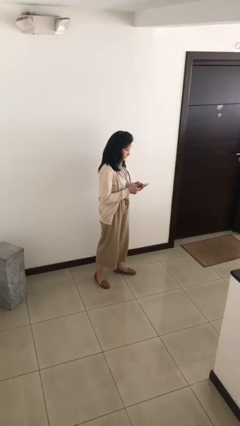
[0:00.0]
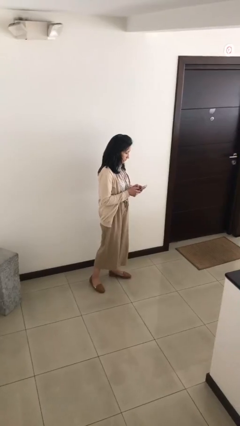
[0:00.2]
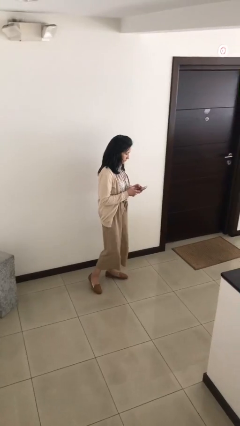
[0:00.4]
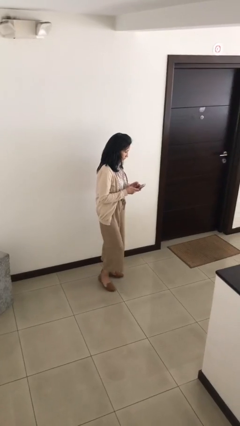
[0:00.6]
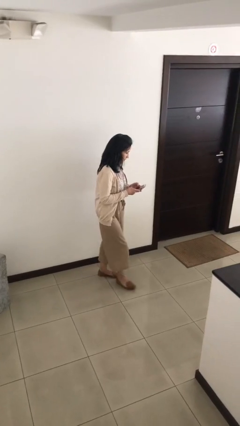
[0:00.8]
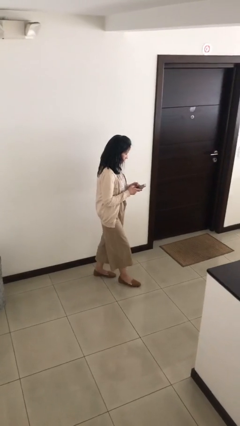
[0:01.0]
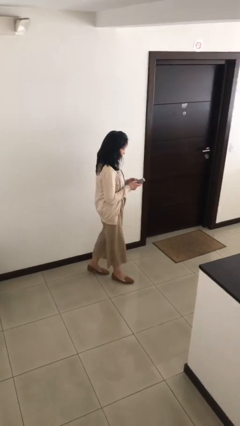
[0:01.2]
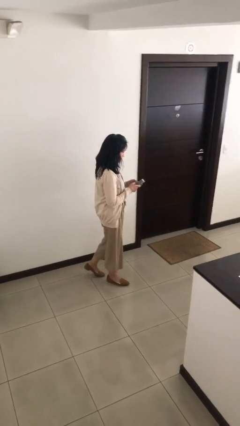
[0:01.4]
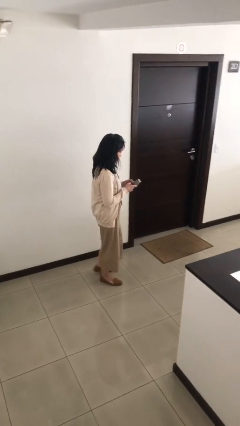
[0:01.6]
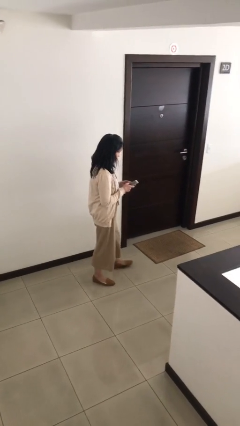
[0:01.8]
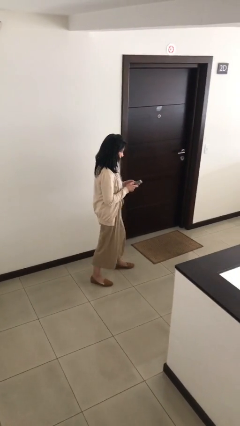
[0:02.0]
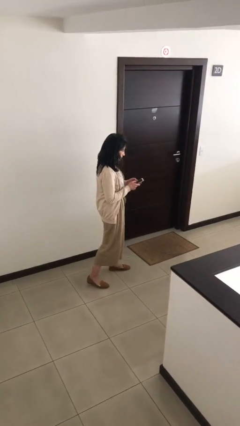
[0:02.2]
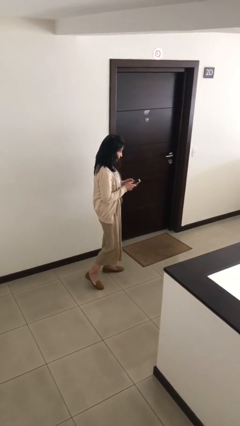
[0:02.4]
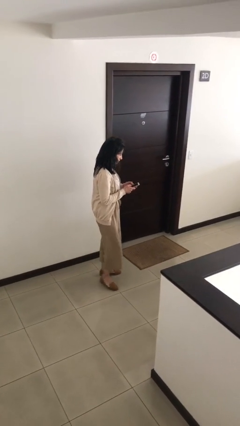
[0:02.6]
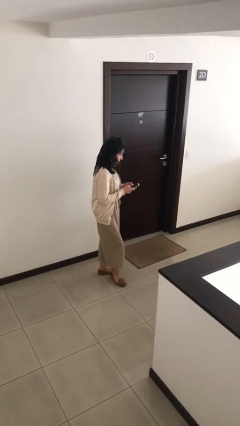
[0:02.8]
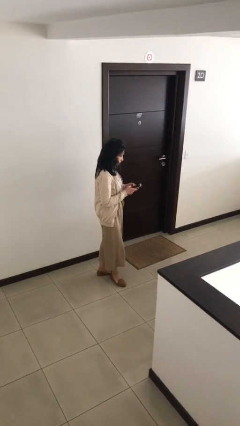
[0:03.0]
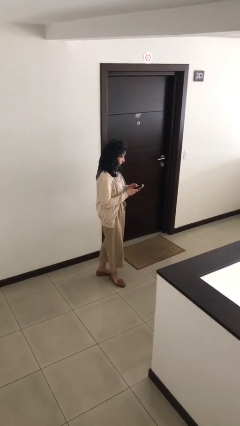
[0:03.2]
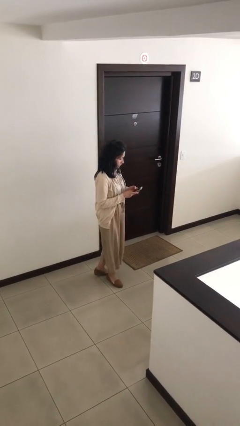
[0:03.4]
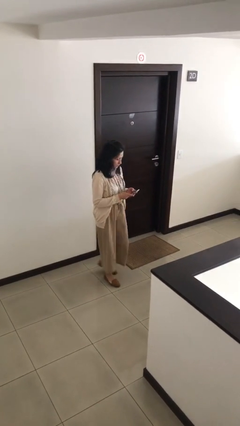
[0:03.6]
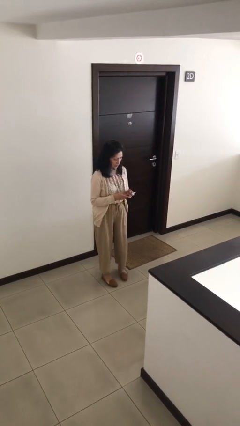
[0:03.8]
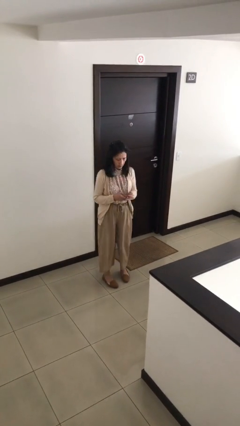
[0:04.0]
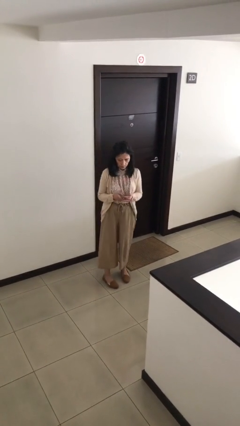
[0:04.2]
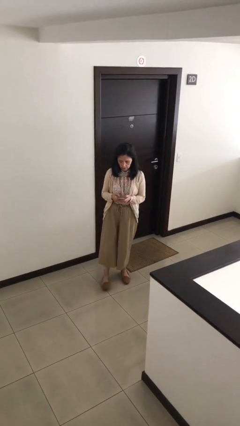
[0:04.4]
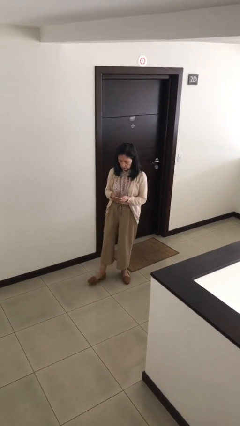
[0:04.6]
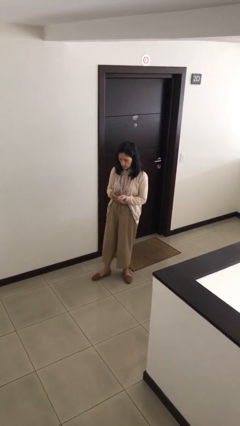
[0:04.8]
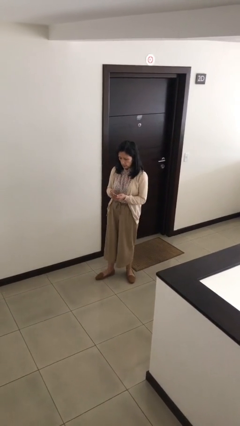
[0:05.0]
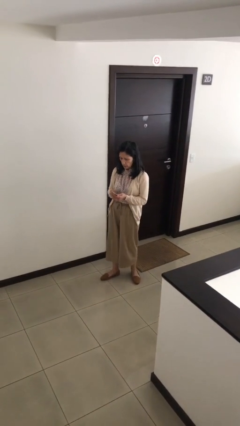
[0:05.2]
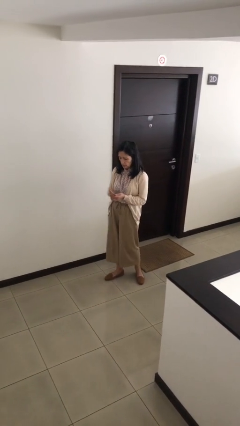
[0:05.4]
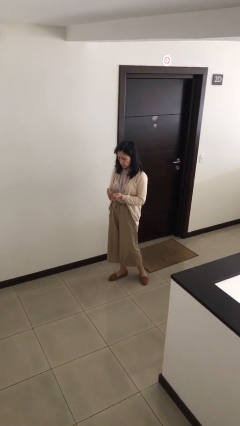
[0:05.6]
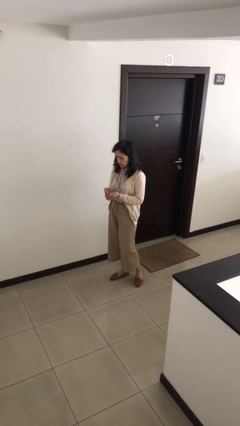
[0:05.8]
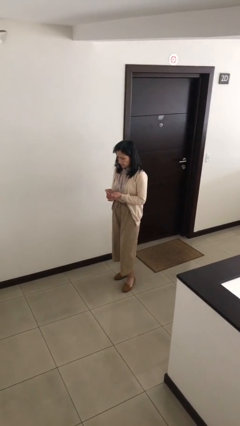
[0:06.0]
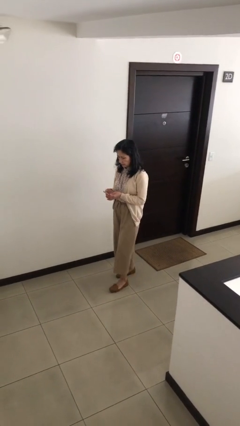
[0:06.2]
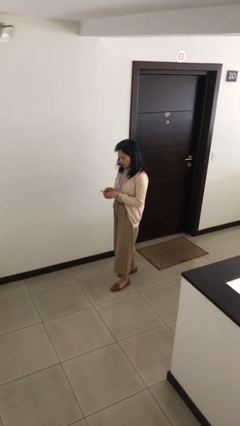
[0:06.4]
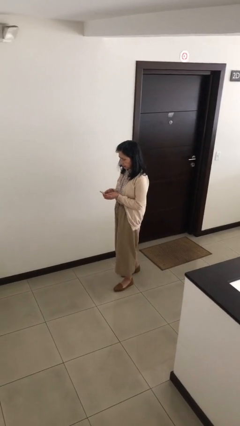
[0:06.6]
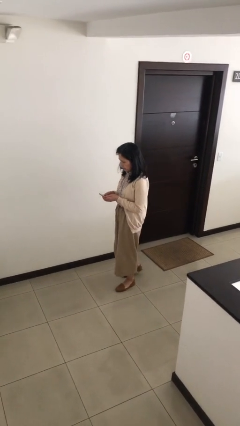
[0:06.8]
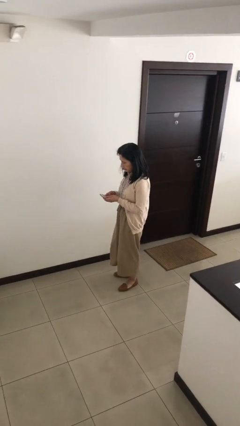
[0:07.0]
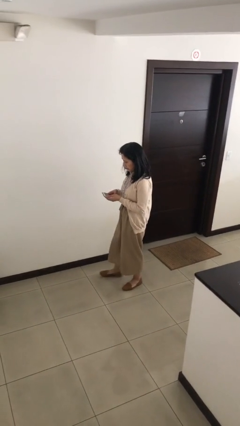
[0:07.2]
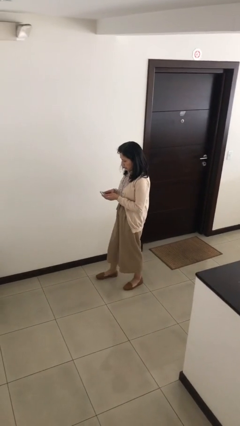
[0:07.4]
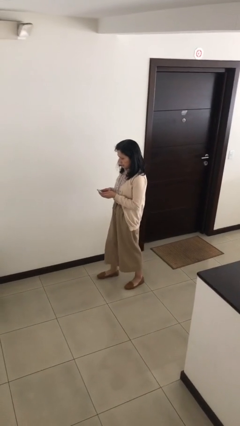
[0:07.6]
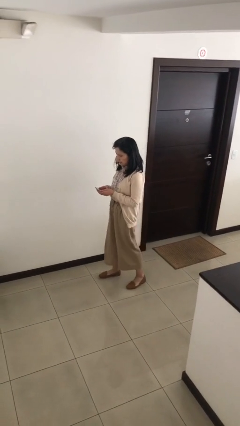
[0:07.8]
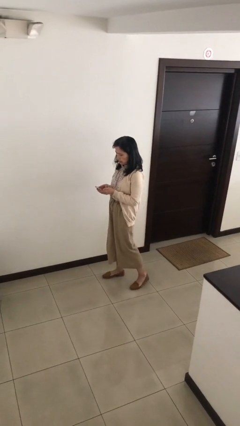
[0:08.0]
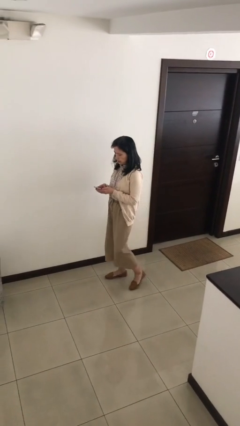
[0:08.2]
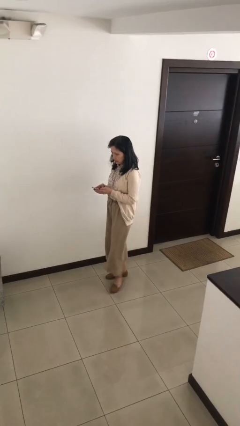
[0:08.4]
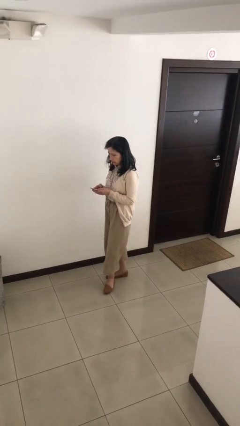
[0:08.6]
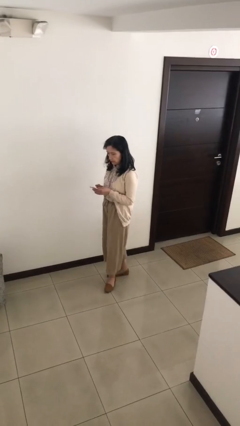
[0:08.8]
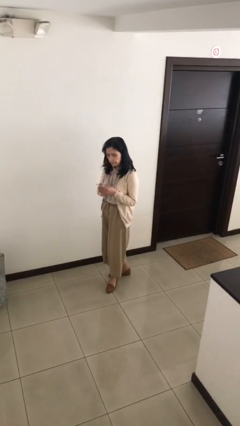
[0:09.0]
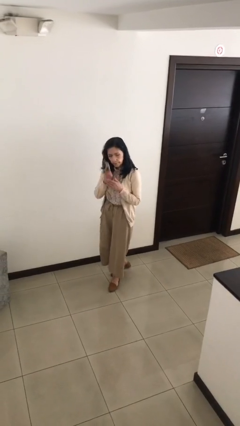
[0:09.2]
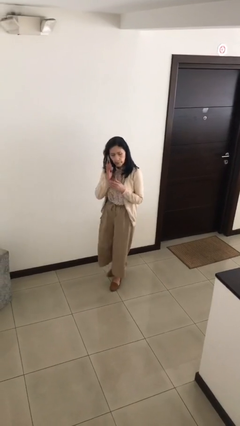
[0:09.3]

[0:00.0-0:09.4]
person texts on phone

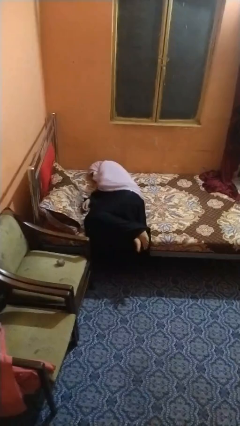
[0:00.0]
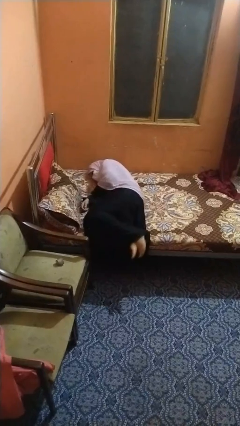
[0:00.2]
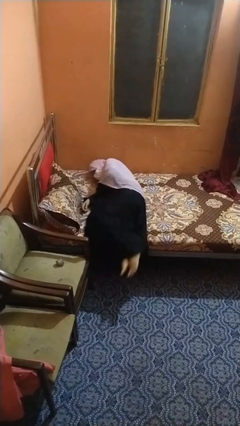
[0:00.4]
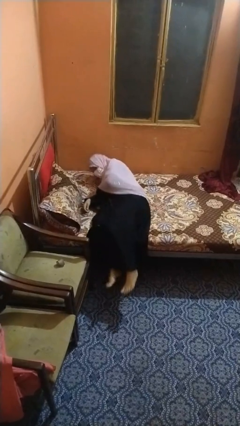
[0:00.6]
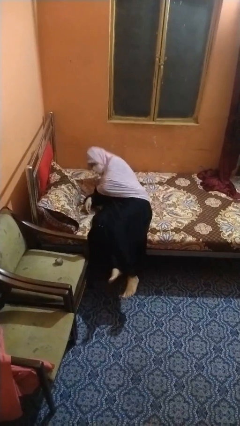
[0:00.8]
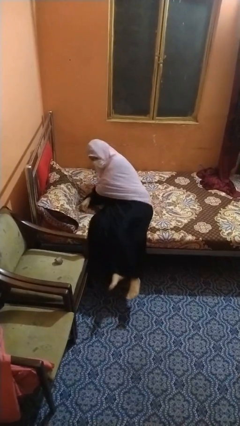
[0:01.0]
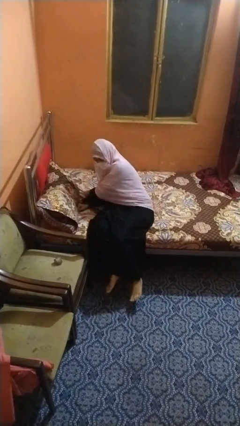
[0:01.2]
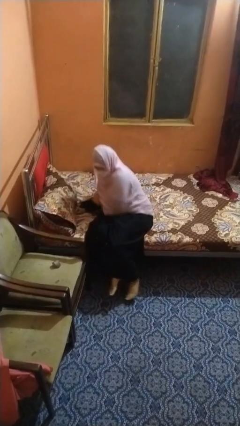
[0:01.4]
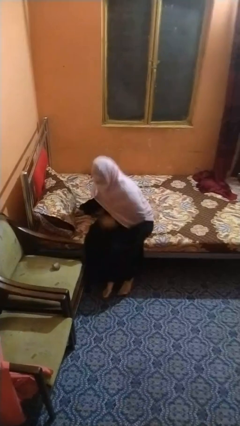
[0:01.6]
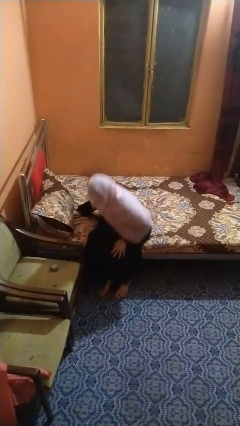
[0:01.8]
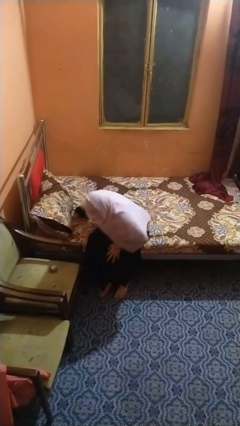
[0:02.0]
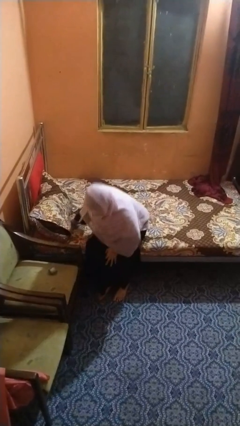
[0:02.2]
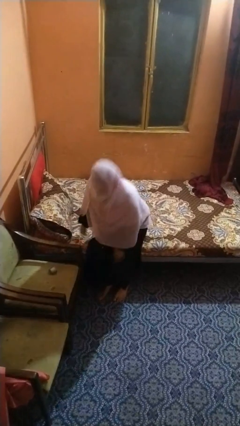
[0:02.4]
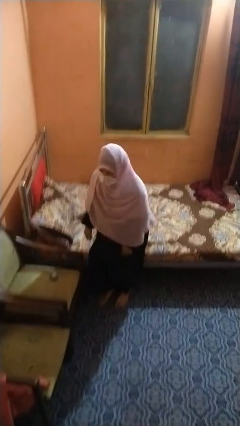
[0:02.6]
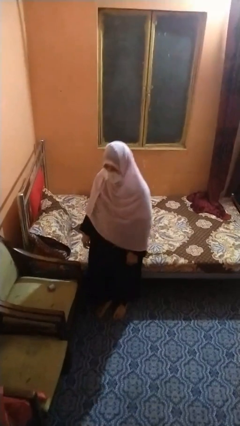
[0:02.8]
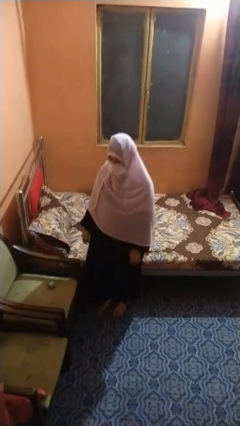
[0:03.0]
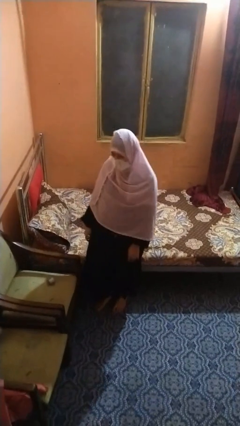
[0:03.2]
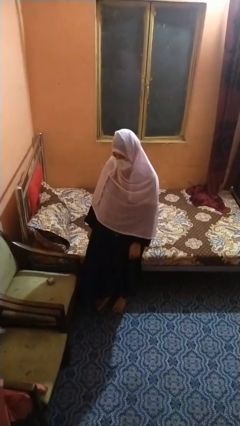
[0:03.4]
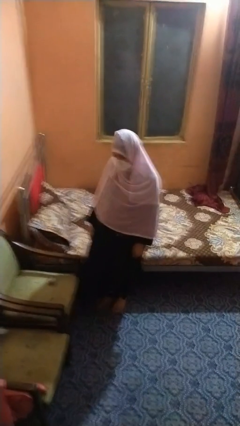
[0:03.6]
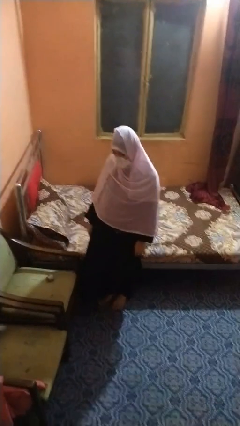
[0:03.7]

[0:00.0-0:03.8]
person stands up

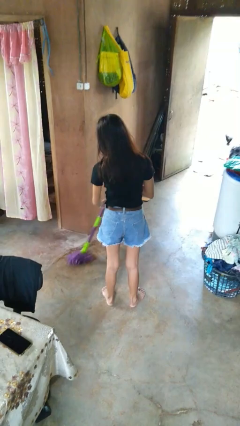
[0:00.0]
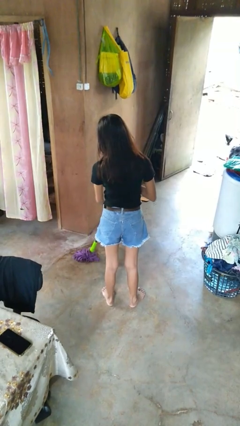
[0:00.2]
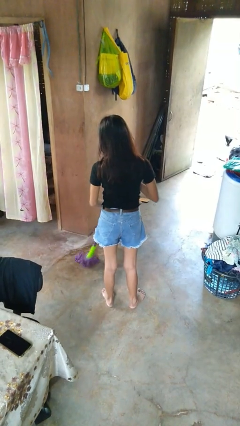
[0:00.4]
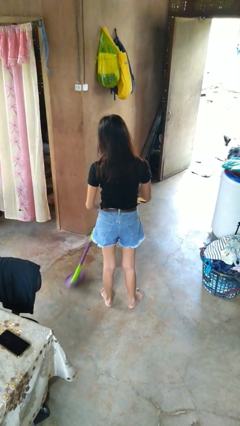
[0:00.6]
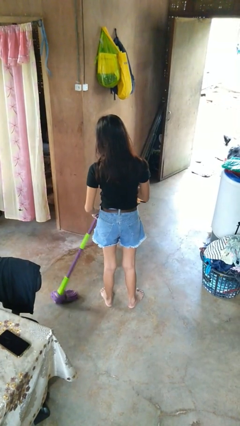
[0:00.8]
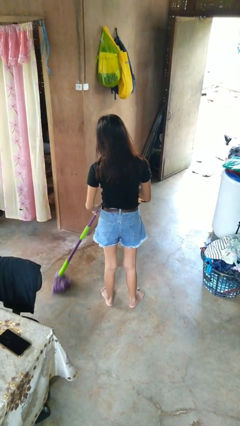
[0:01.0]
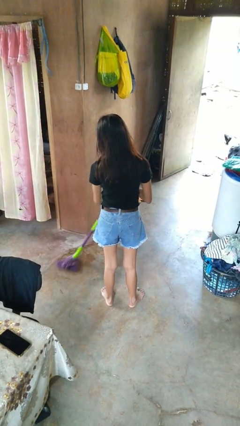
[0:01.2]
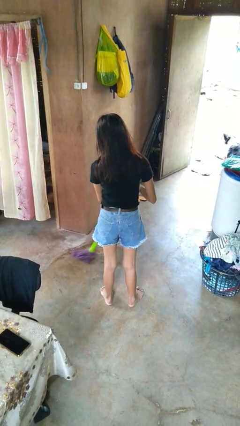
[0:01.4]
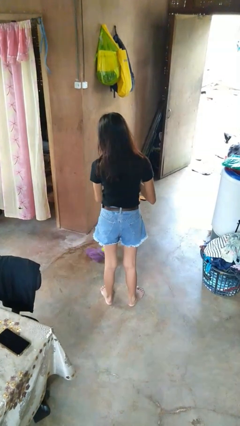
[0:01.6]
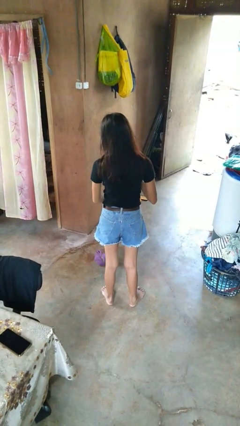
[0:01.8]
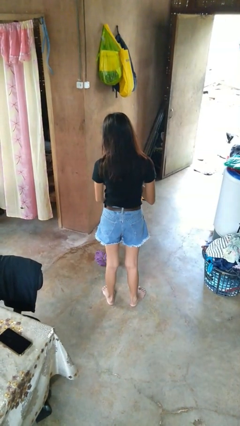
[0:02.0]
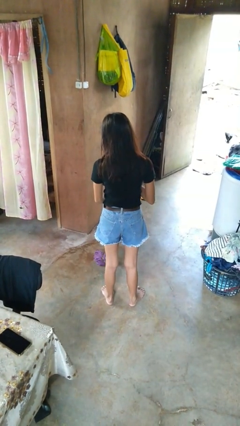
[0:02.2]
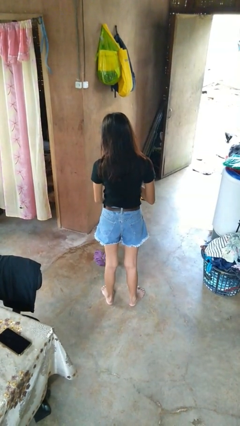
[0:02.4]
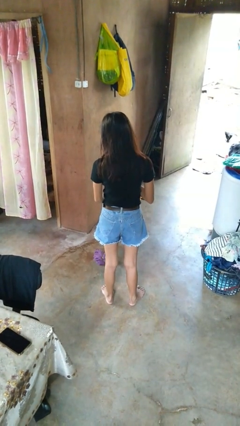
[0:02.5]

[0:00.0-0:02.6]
person mops

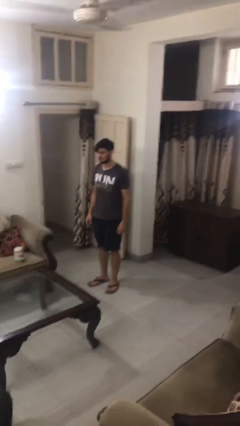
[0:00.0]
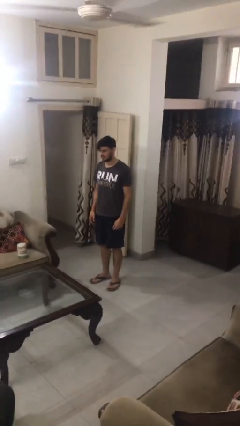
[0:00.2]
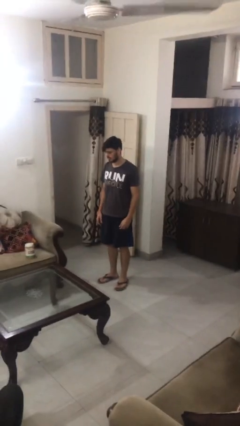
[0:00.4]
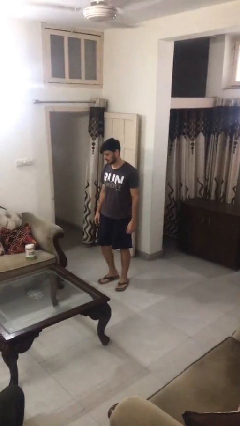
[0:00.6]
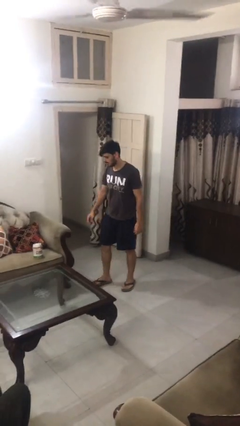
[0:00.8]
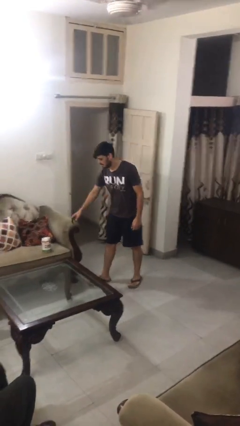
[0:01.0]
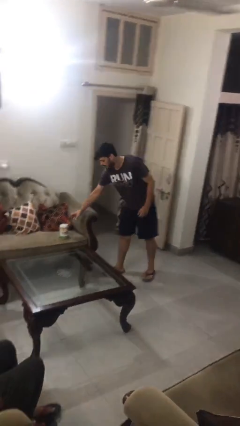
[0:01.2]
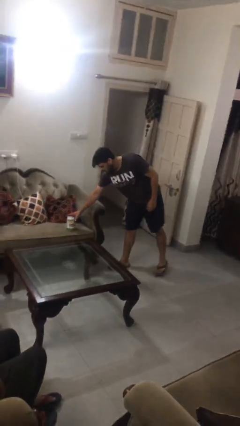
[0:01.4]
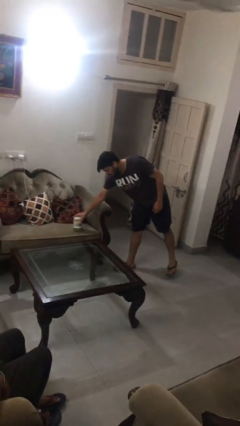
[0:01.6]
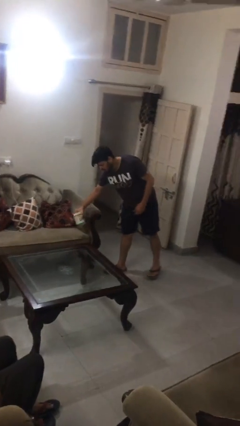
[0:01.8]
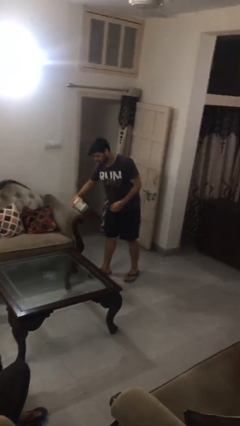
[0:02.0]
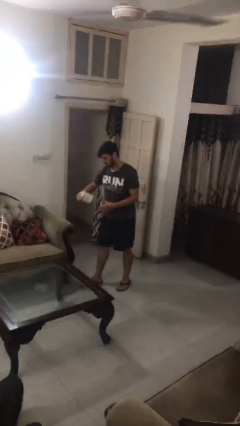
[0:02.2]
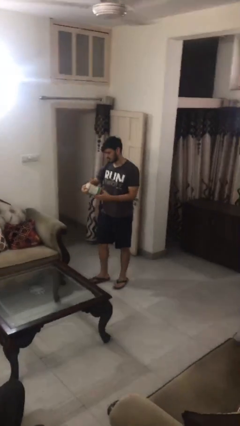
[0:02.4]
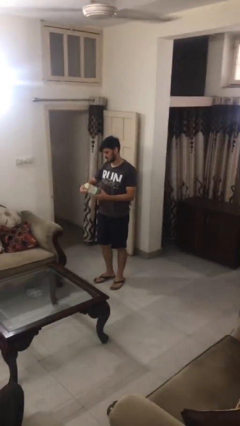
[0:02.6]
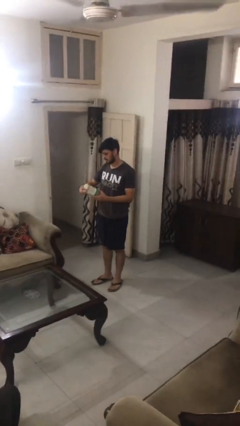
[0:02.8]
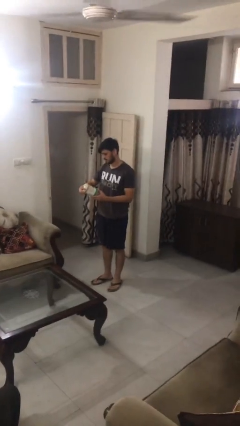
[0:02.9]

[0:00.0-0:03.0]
person picks up object from couch
